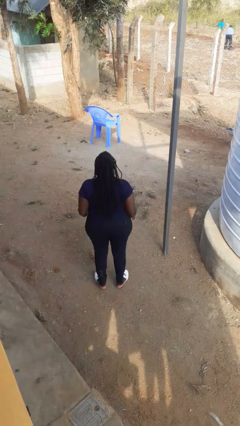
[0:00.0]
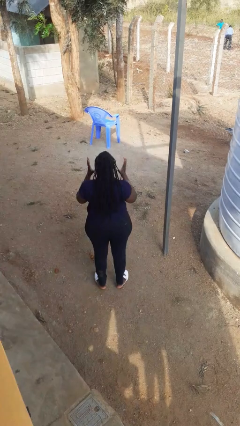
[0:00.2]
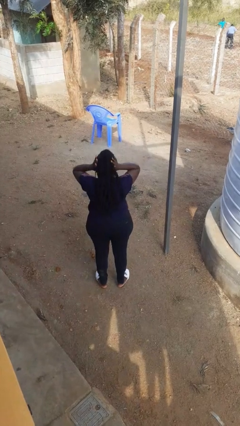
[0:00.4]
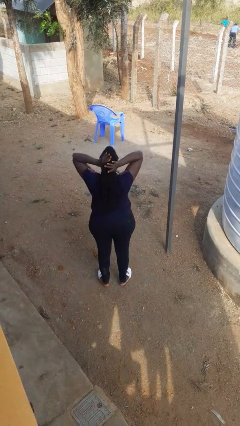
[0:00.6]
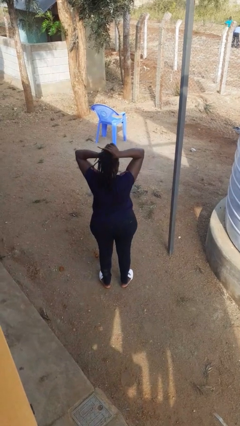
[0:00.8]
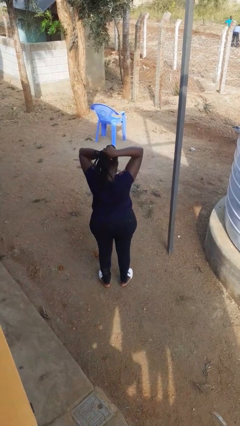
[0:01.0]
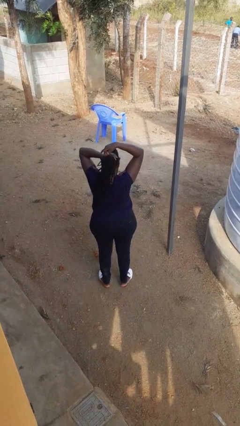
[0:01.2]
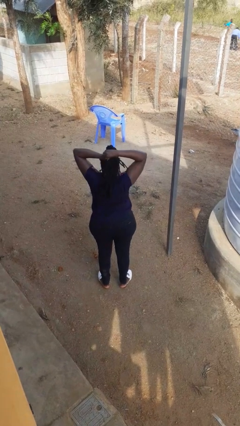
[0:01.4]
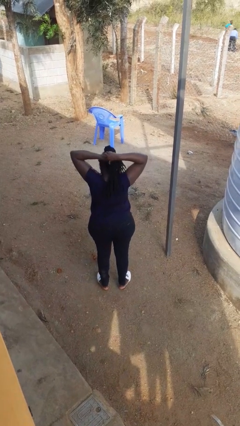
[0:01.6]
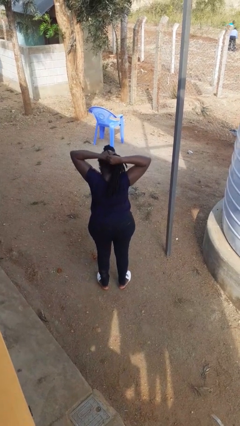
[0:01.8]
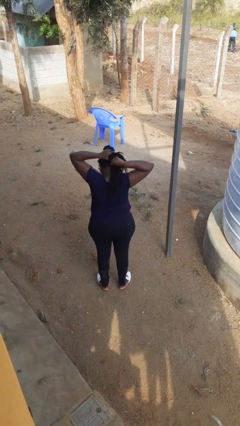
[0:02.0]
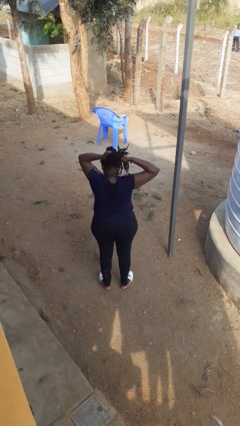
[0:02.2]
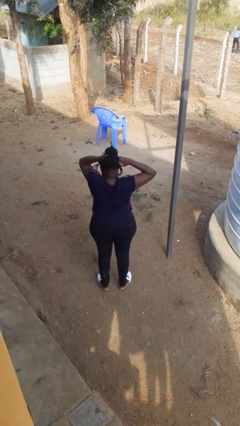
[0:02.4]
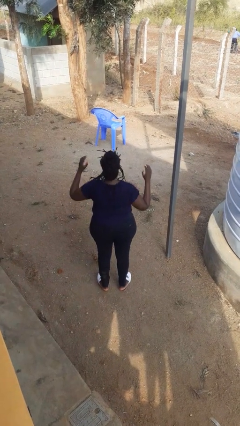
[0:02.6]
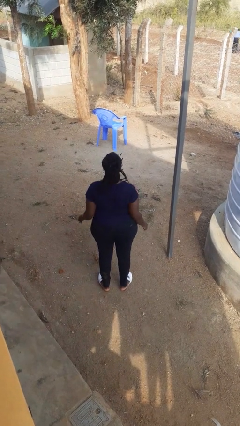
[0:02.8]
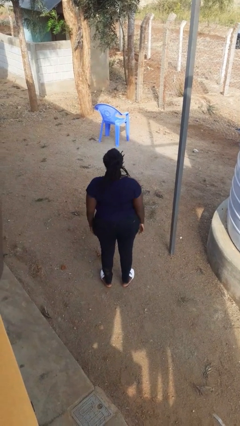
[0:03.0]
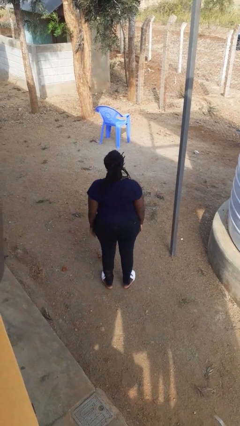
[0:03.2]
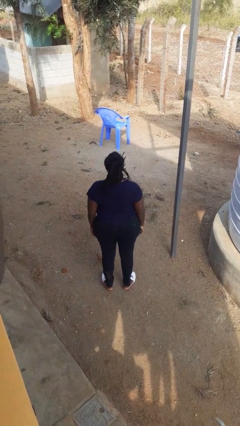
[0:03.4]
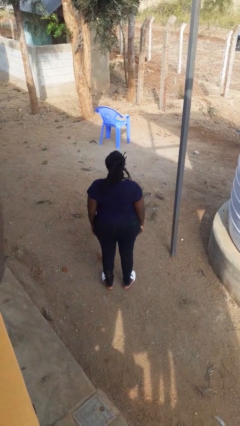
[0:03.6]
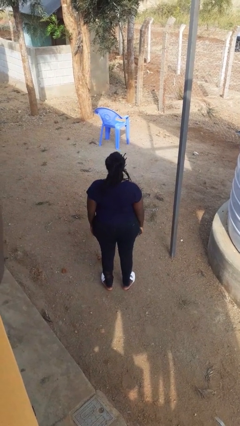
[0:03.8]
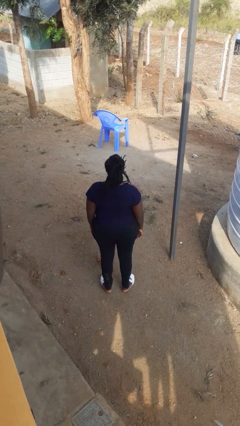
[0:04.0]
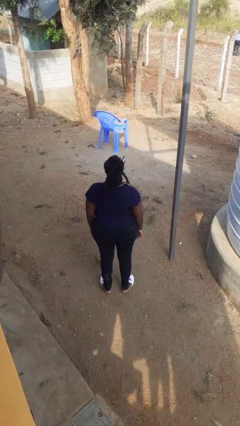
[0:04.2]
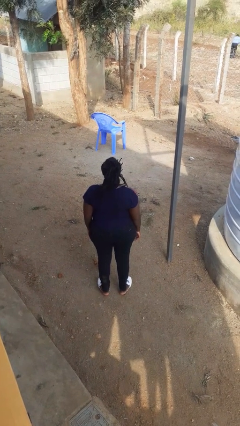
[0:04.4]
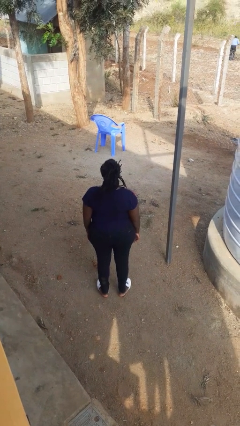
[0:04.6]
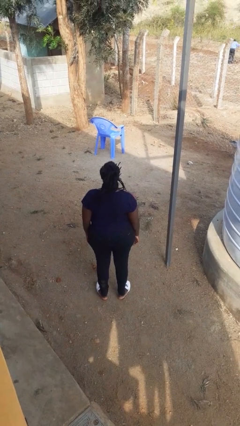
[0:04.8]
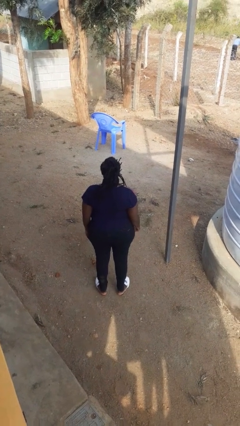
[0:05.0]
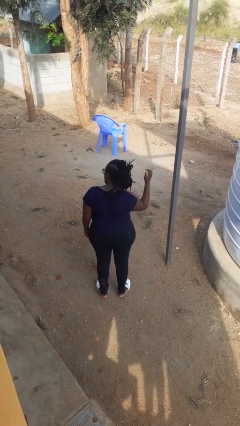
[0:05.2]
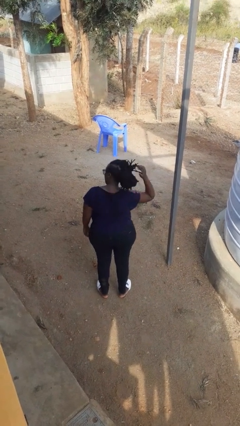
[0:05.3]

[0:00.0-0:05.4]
person puts hair in ponytail

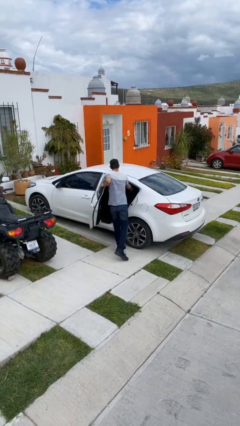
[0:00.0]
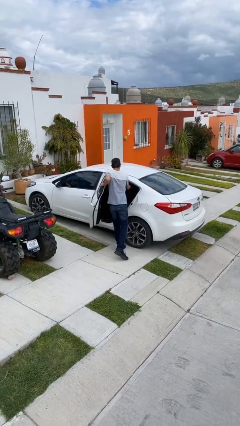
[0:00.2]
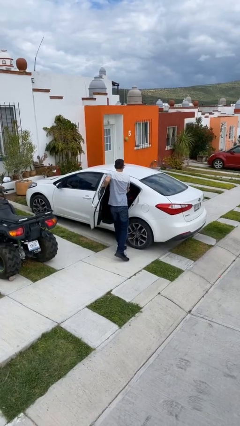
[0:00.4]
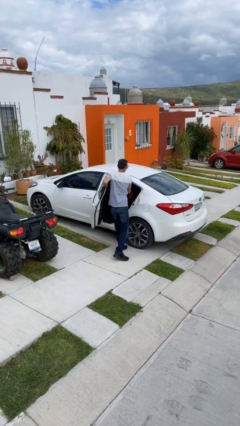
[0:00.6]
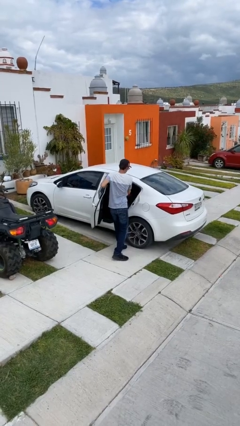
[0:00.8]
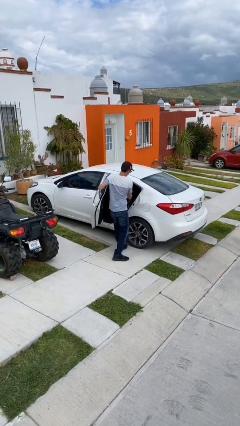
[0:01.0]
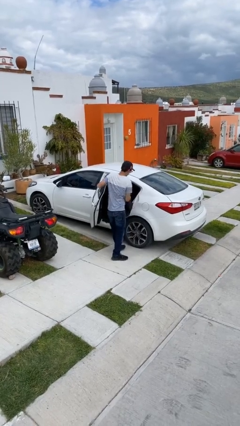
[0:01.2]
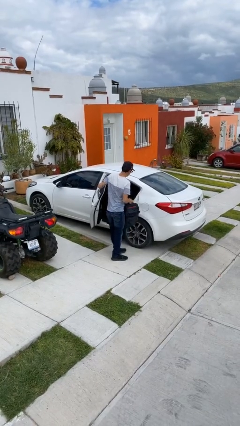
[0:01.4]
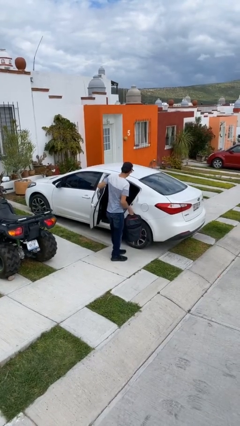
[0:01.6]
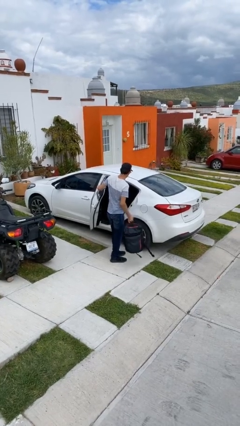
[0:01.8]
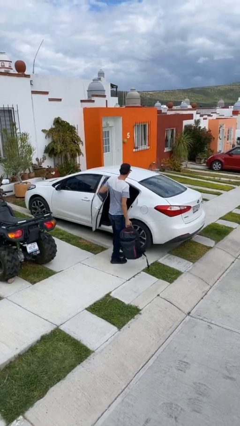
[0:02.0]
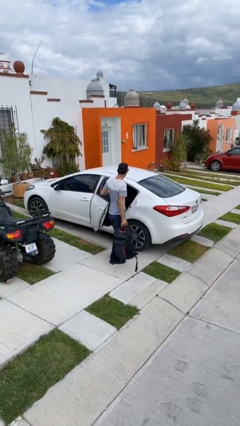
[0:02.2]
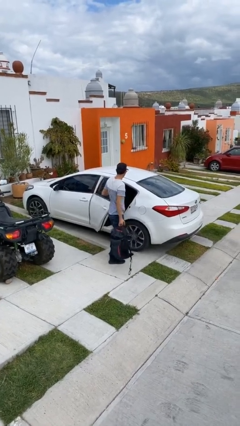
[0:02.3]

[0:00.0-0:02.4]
person unloads car

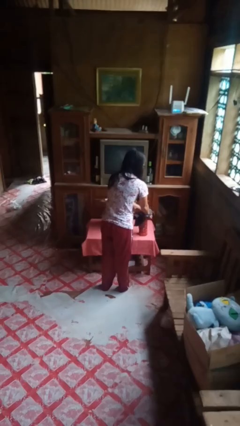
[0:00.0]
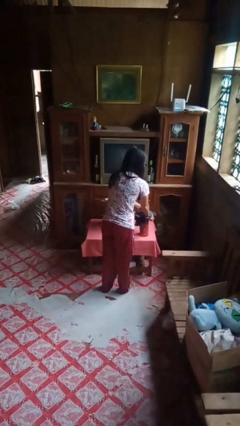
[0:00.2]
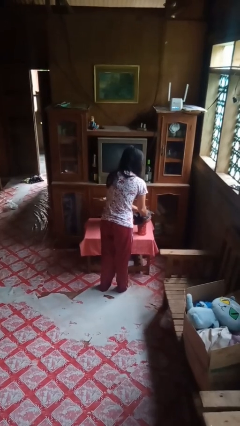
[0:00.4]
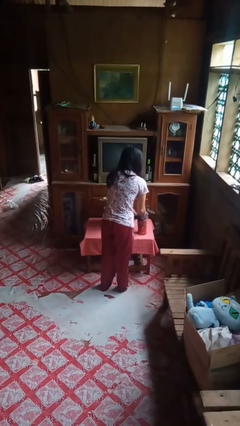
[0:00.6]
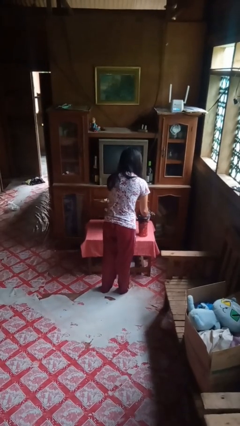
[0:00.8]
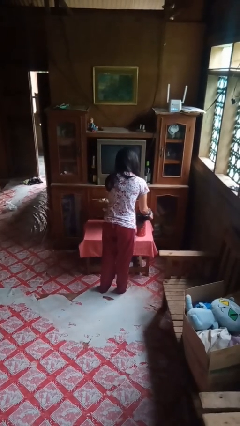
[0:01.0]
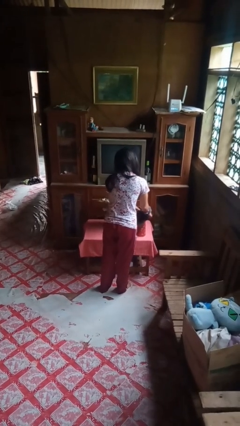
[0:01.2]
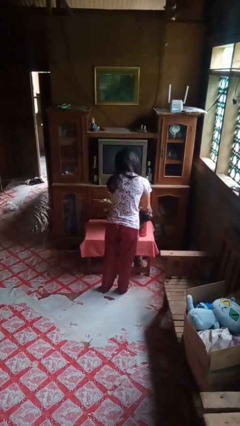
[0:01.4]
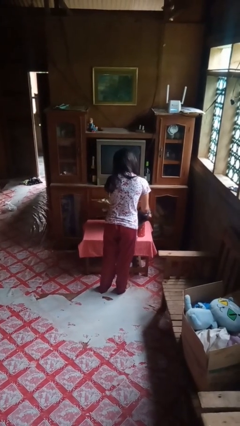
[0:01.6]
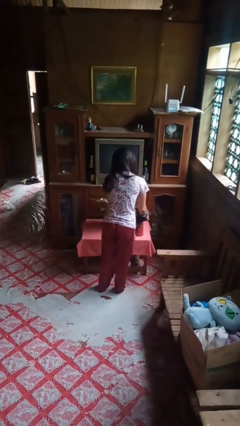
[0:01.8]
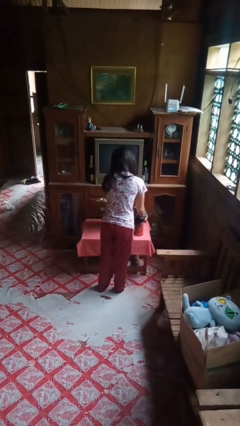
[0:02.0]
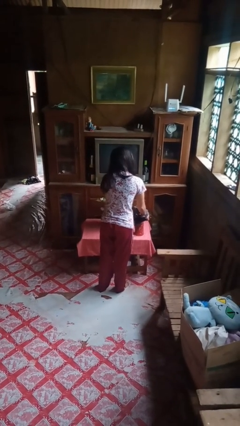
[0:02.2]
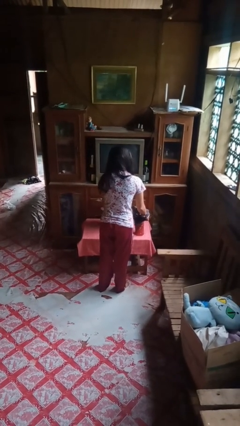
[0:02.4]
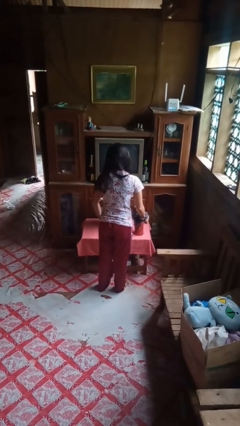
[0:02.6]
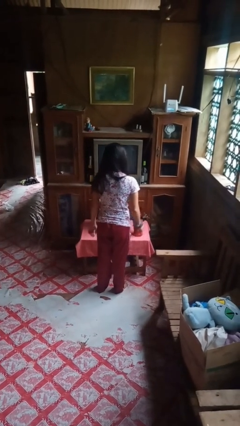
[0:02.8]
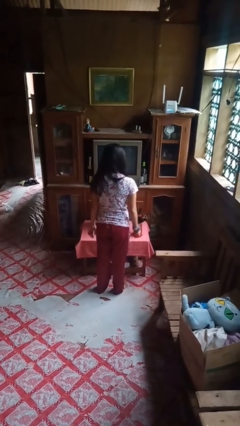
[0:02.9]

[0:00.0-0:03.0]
person arranges flowers in vase

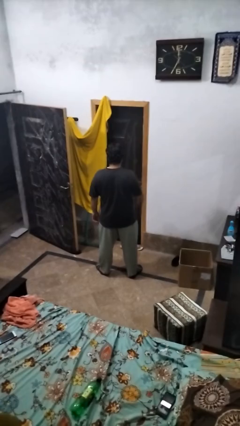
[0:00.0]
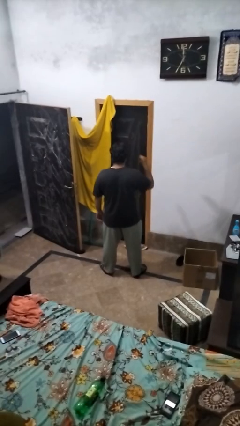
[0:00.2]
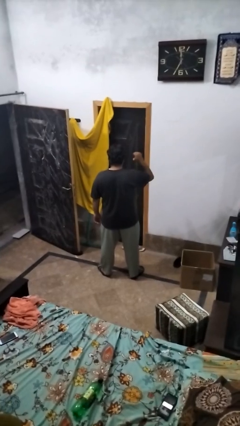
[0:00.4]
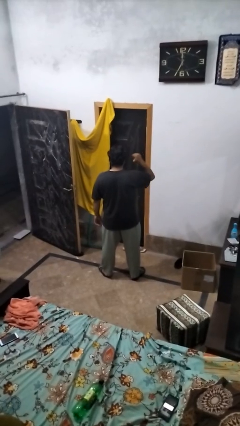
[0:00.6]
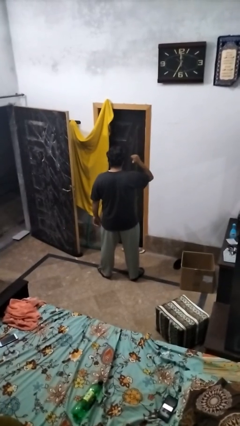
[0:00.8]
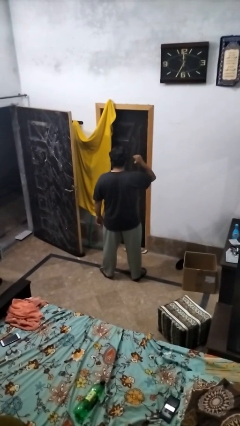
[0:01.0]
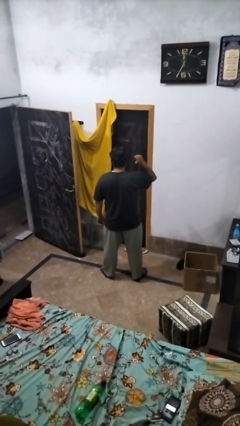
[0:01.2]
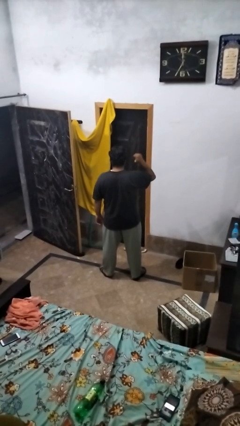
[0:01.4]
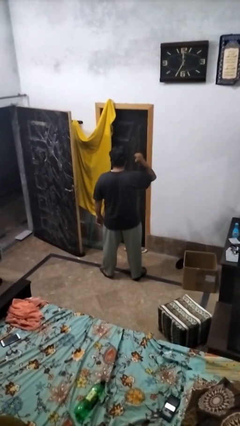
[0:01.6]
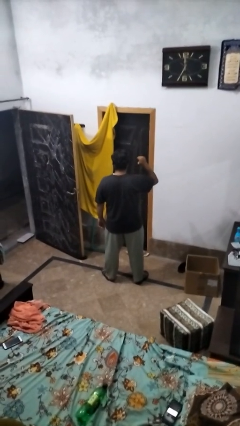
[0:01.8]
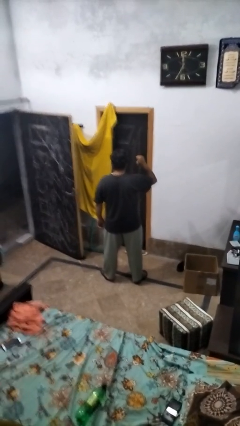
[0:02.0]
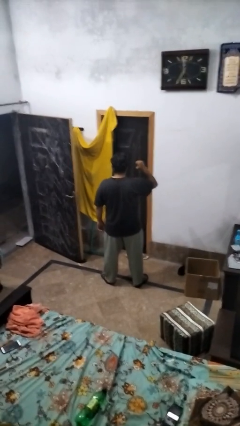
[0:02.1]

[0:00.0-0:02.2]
person gestures behind me

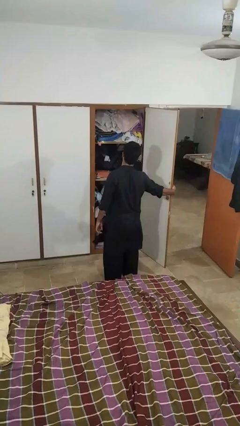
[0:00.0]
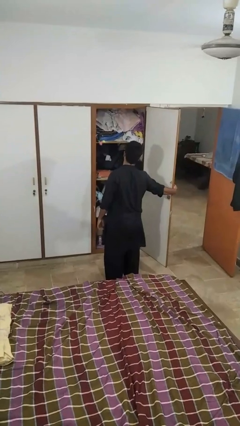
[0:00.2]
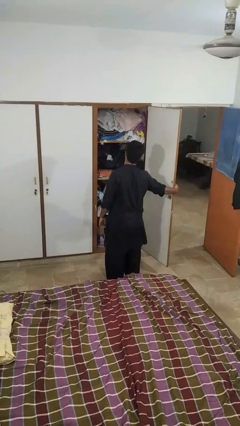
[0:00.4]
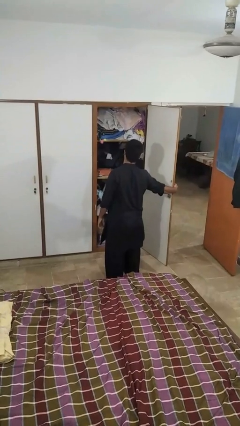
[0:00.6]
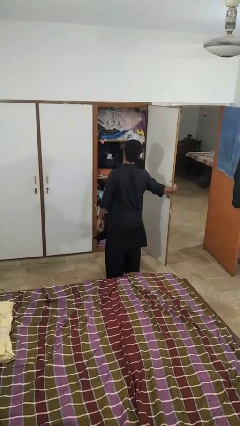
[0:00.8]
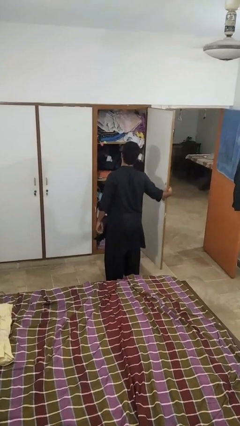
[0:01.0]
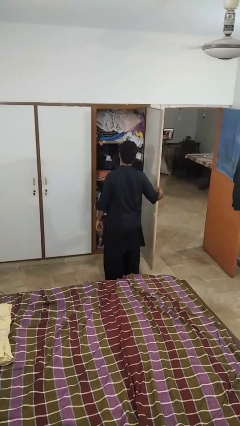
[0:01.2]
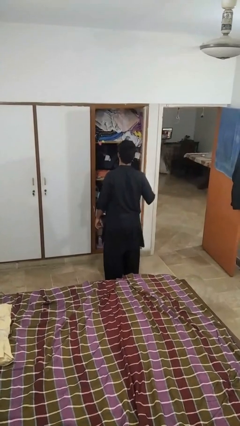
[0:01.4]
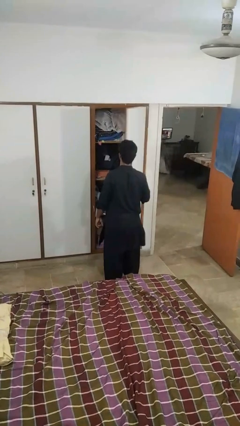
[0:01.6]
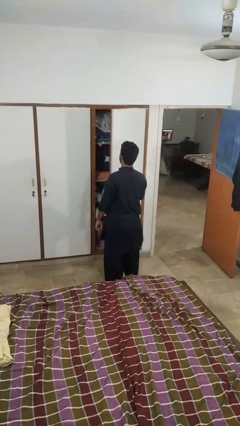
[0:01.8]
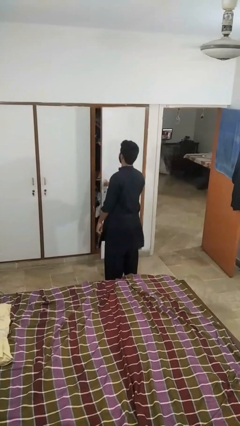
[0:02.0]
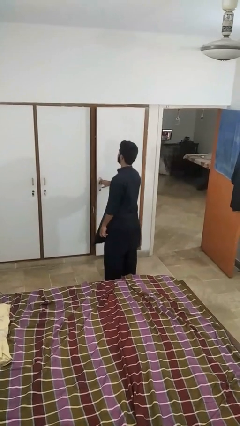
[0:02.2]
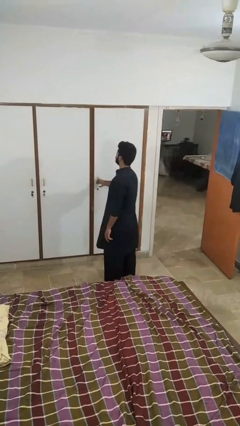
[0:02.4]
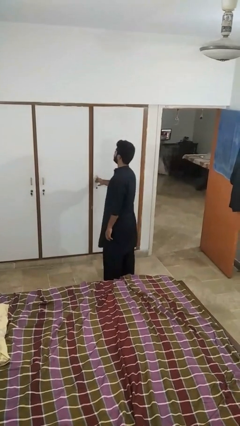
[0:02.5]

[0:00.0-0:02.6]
person closes closet door

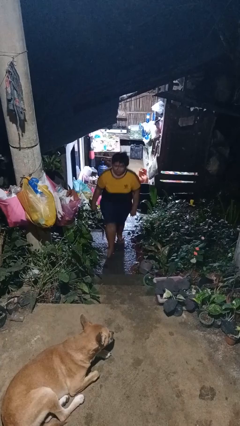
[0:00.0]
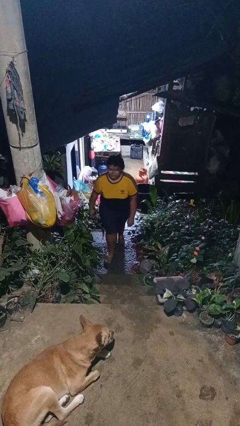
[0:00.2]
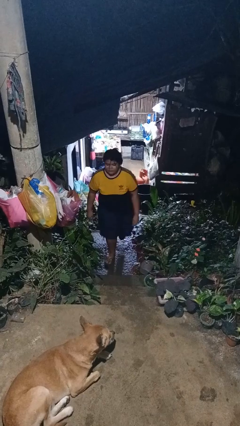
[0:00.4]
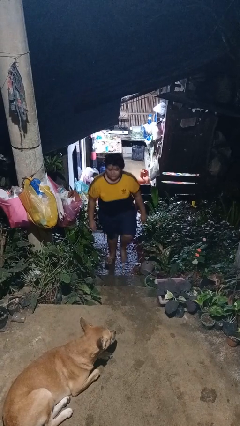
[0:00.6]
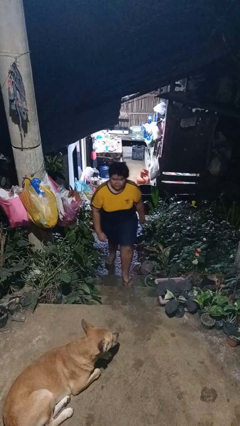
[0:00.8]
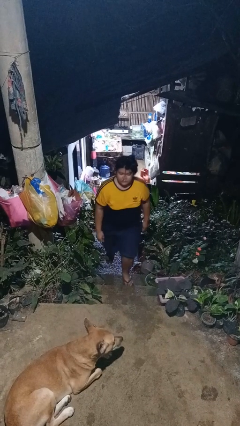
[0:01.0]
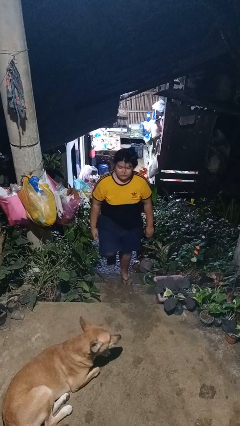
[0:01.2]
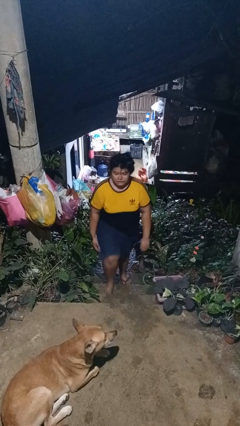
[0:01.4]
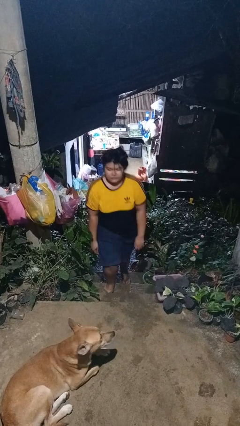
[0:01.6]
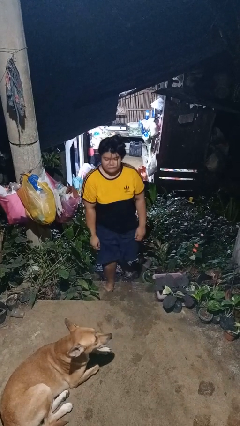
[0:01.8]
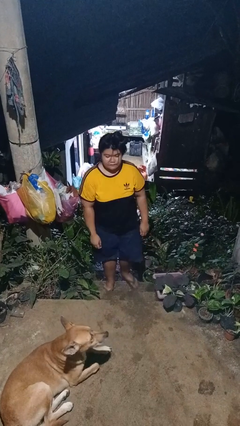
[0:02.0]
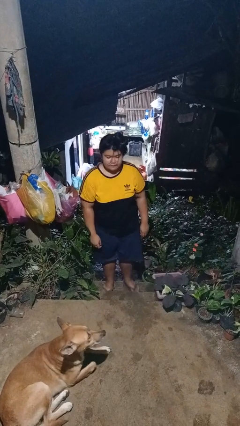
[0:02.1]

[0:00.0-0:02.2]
person climbs up stairs
